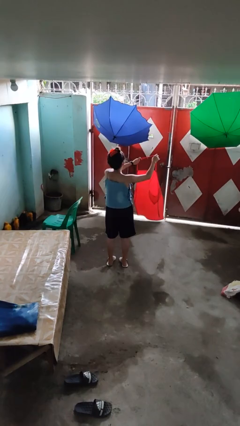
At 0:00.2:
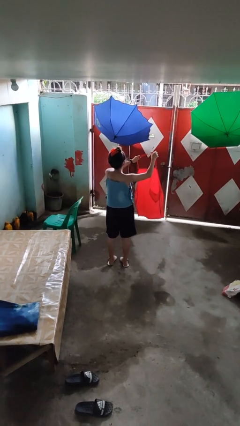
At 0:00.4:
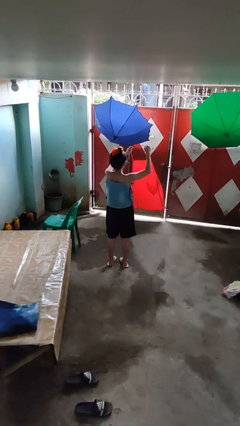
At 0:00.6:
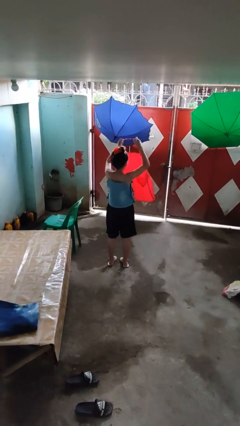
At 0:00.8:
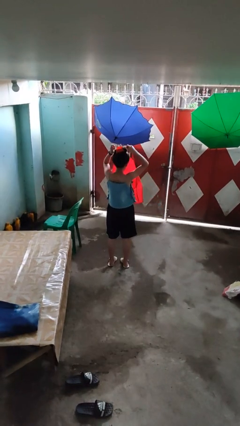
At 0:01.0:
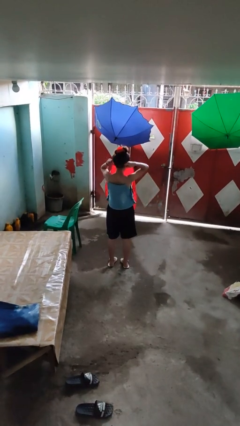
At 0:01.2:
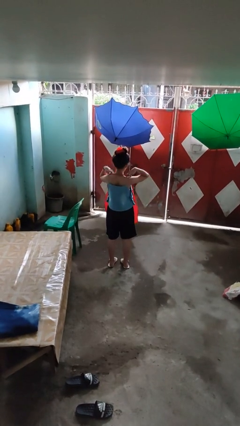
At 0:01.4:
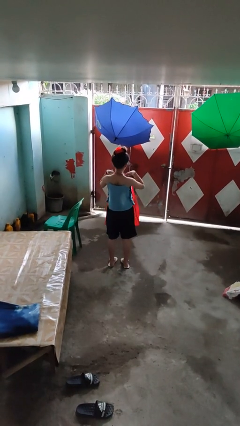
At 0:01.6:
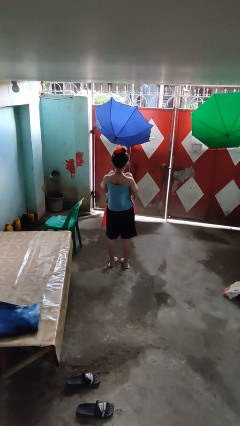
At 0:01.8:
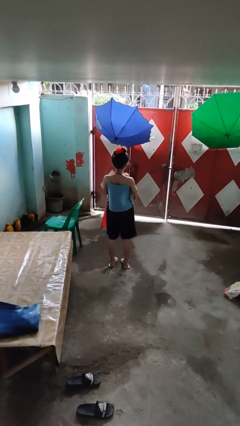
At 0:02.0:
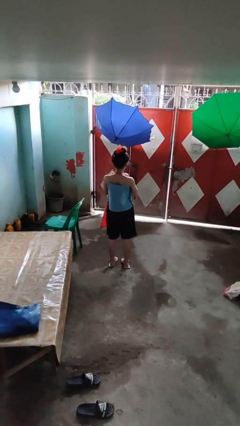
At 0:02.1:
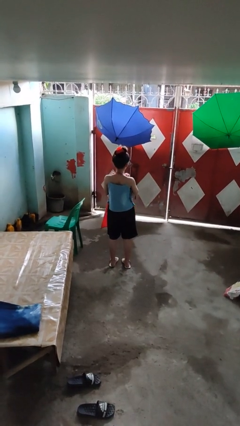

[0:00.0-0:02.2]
person puts on apron

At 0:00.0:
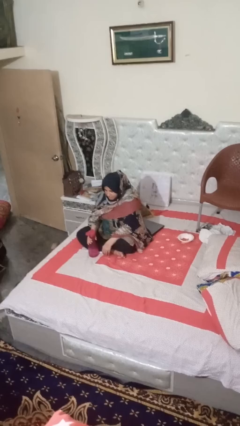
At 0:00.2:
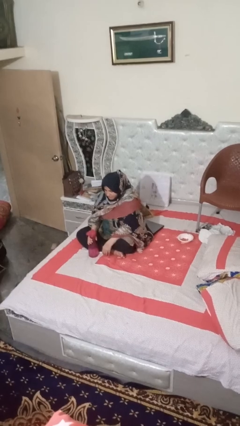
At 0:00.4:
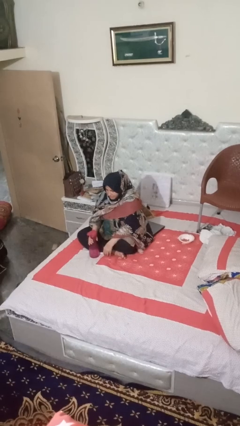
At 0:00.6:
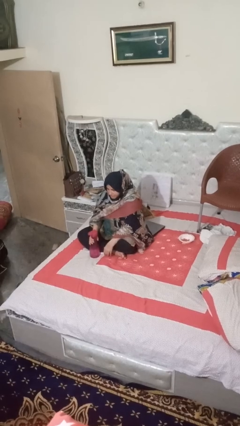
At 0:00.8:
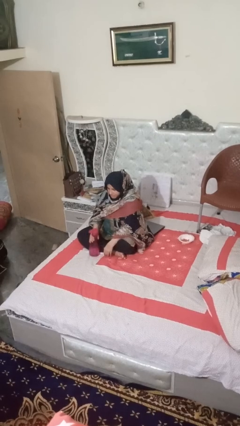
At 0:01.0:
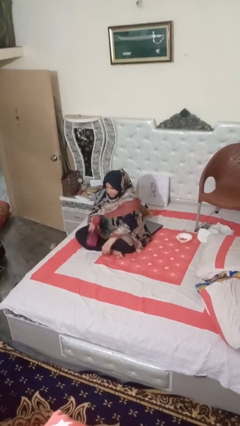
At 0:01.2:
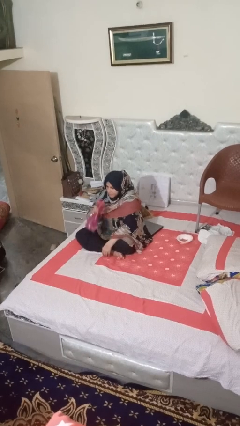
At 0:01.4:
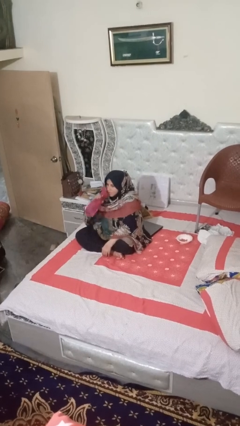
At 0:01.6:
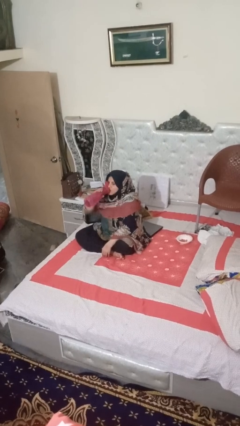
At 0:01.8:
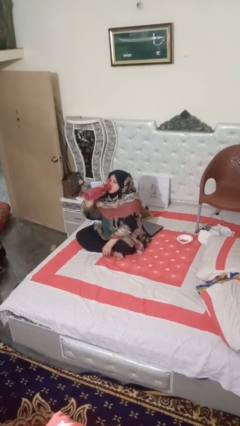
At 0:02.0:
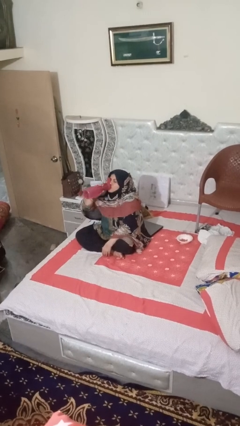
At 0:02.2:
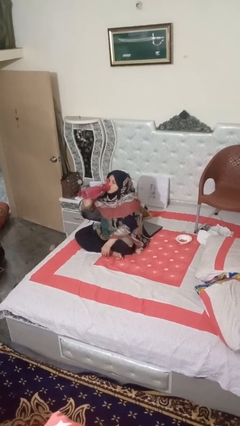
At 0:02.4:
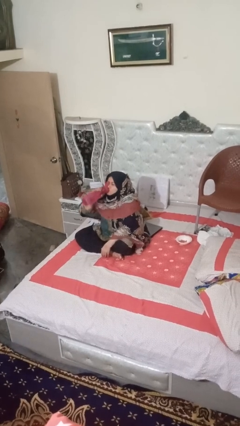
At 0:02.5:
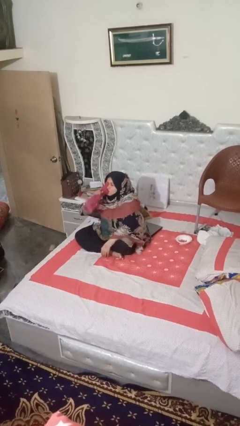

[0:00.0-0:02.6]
person drinks from bottle

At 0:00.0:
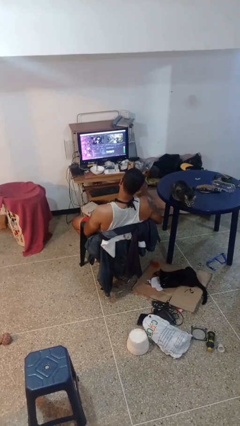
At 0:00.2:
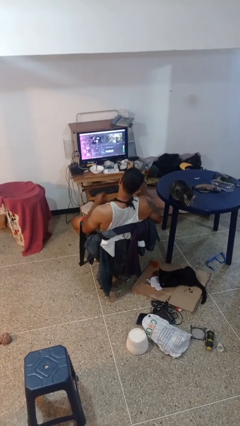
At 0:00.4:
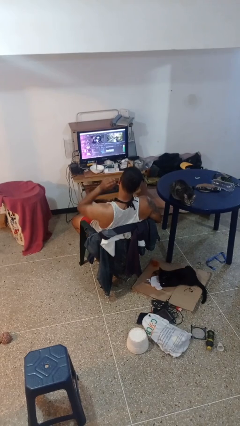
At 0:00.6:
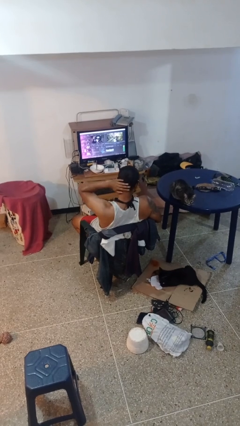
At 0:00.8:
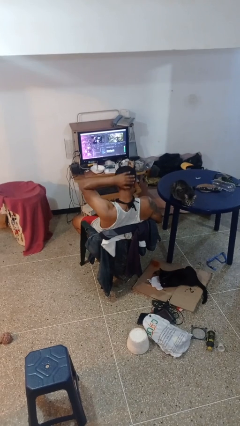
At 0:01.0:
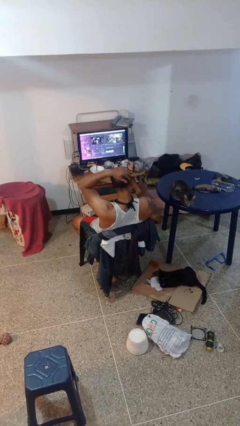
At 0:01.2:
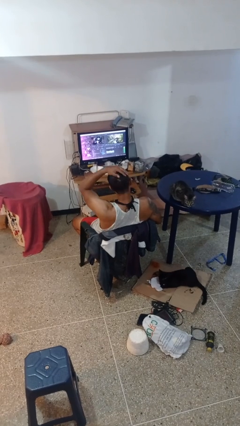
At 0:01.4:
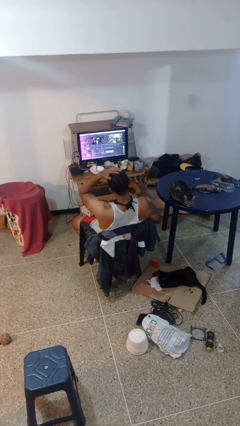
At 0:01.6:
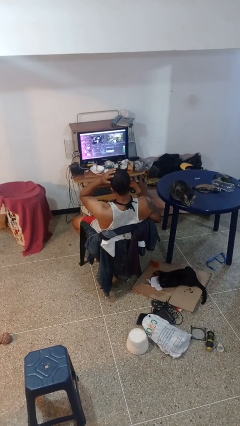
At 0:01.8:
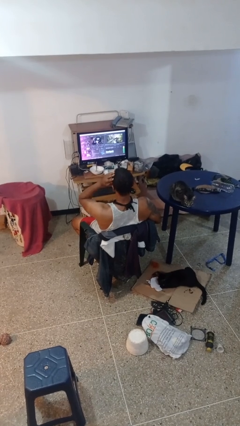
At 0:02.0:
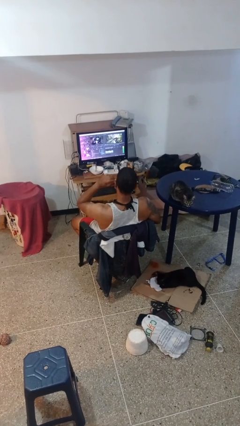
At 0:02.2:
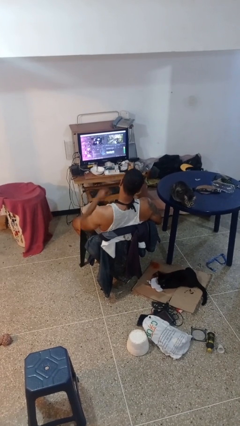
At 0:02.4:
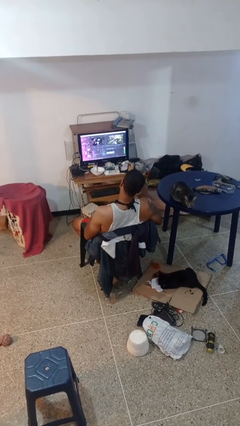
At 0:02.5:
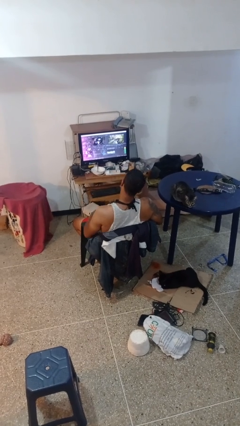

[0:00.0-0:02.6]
person strokes hair

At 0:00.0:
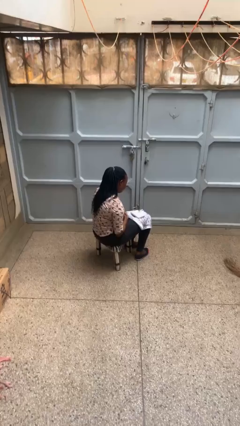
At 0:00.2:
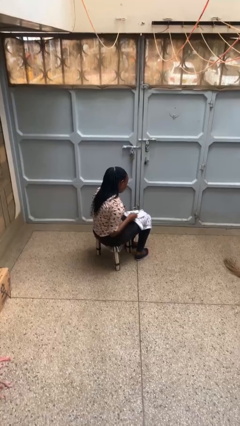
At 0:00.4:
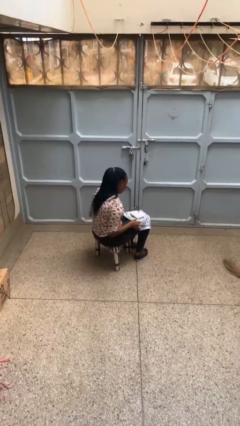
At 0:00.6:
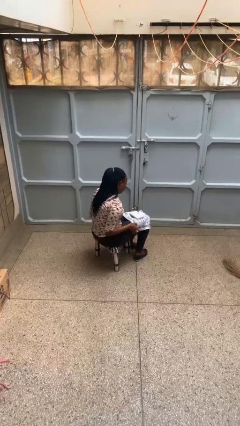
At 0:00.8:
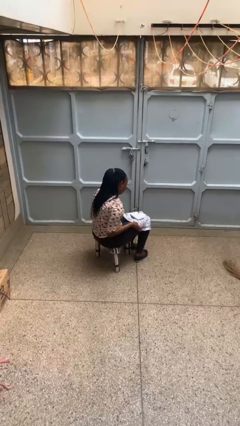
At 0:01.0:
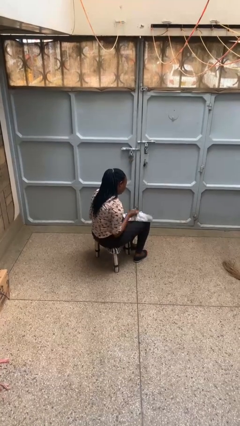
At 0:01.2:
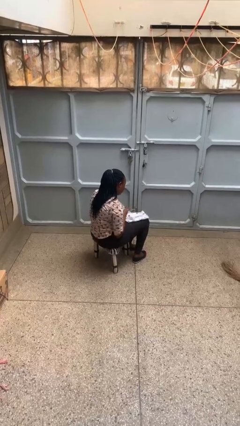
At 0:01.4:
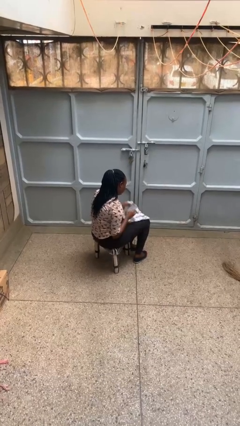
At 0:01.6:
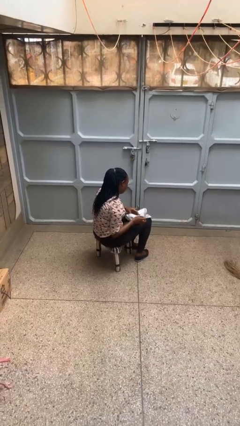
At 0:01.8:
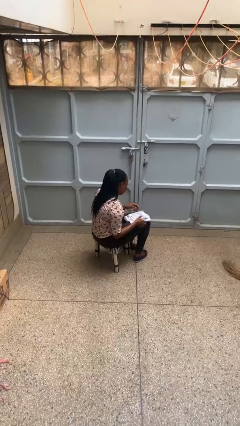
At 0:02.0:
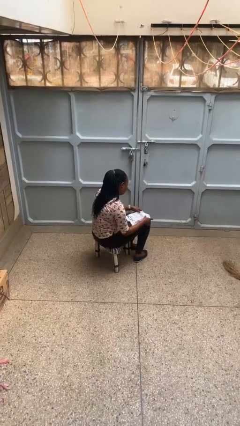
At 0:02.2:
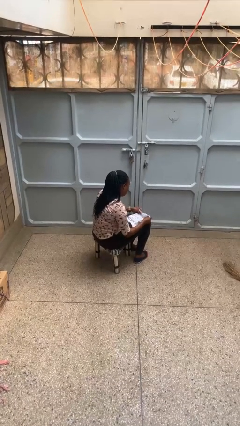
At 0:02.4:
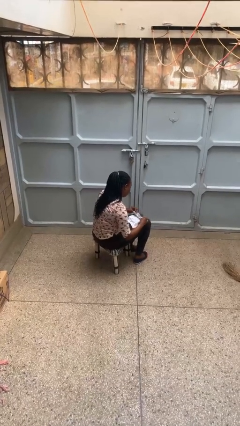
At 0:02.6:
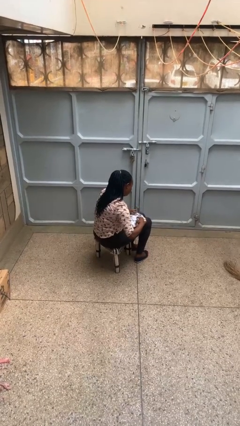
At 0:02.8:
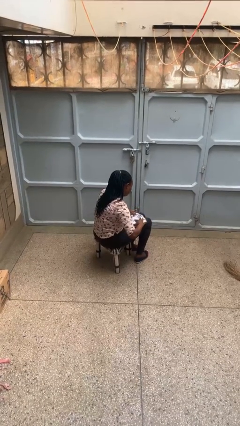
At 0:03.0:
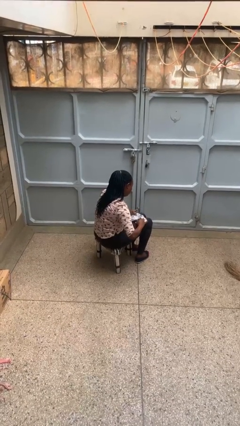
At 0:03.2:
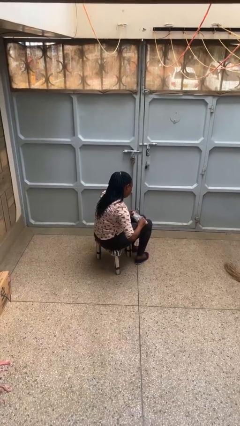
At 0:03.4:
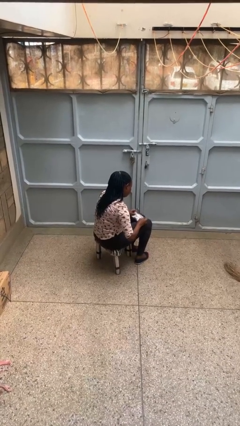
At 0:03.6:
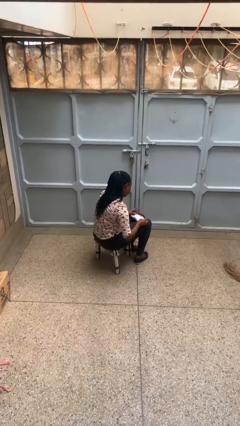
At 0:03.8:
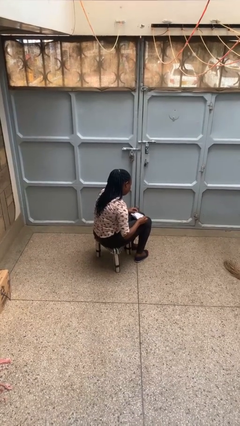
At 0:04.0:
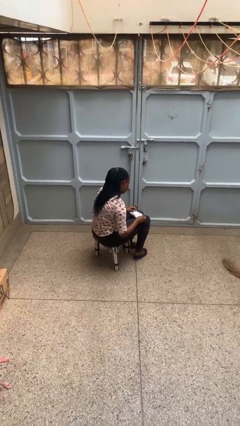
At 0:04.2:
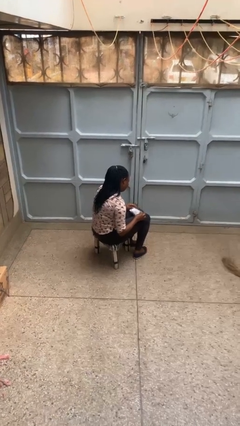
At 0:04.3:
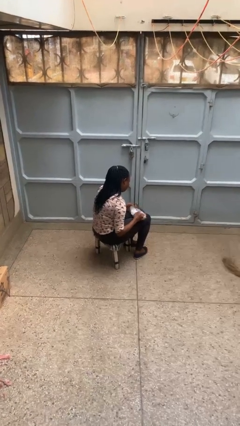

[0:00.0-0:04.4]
person wraps box

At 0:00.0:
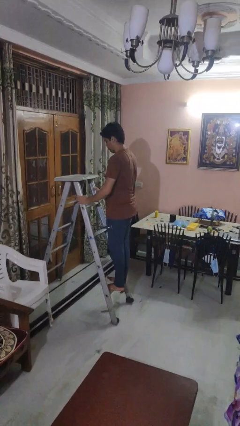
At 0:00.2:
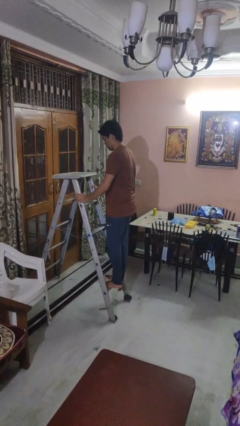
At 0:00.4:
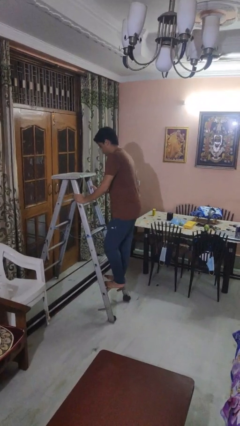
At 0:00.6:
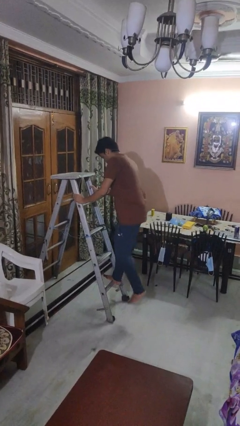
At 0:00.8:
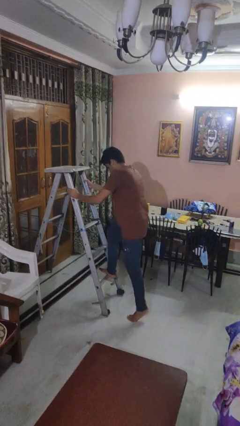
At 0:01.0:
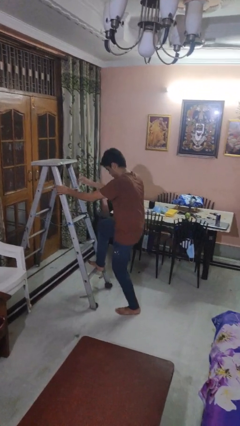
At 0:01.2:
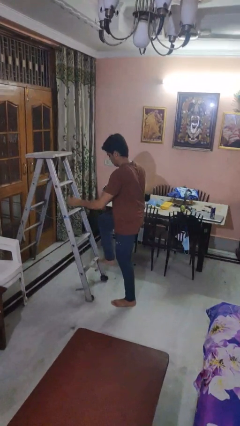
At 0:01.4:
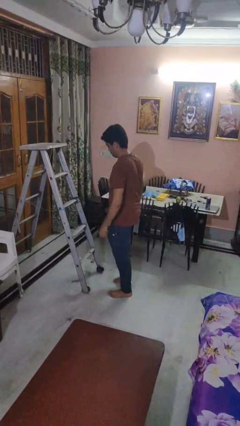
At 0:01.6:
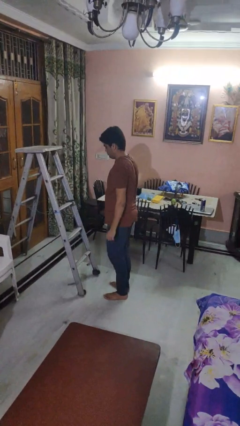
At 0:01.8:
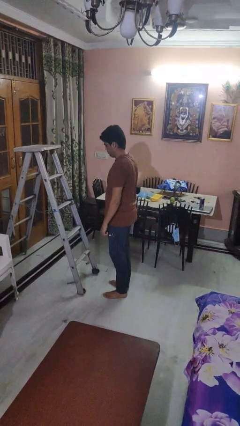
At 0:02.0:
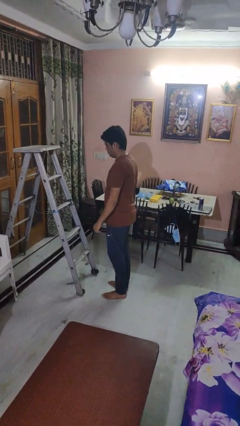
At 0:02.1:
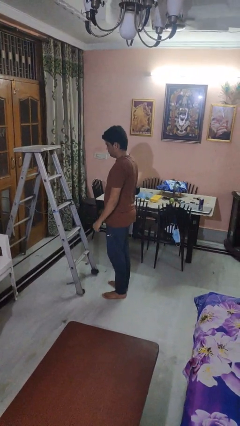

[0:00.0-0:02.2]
person climbs down ladder

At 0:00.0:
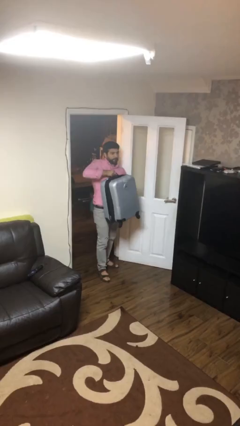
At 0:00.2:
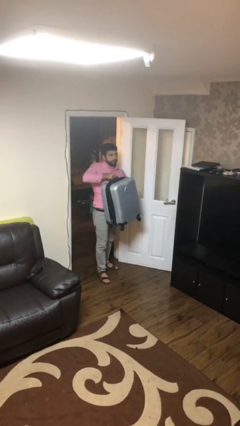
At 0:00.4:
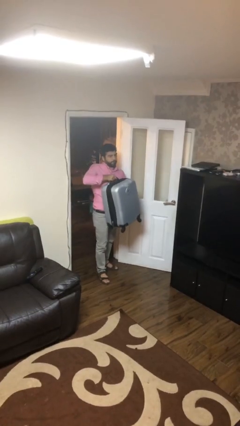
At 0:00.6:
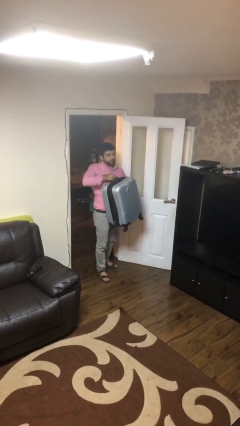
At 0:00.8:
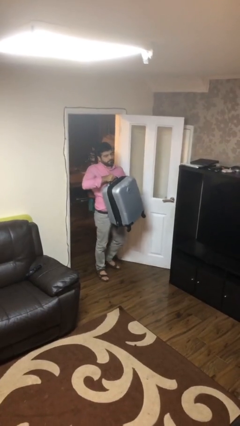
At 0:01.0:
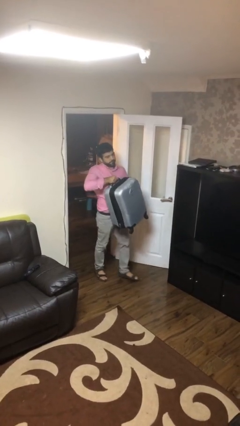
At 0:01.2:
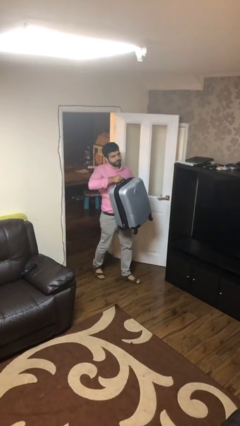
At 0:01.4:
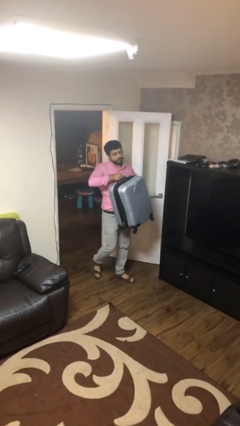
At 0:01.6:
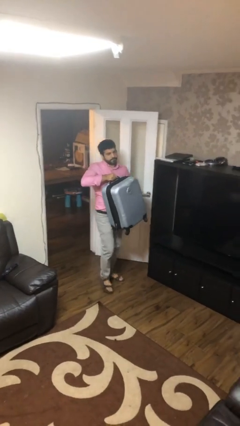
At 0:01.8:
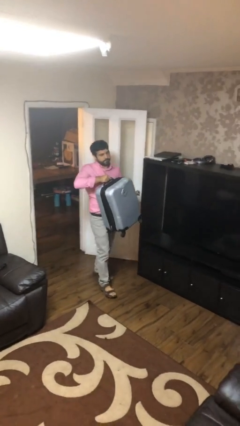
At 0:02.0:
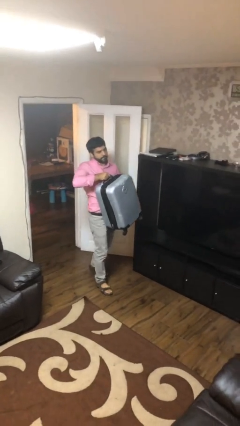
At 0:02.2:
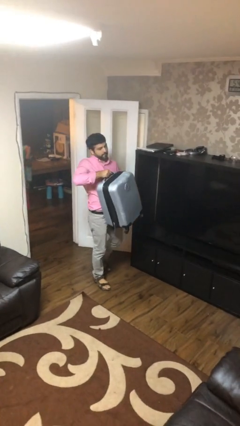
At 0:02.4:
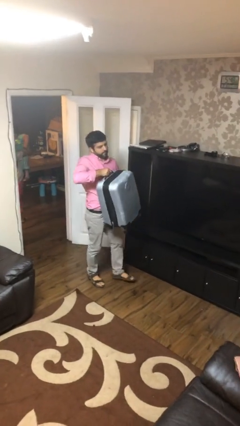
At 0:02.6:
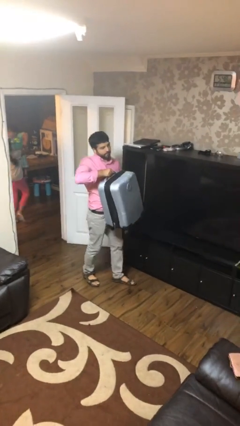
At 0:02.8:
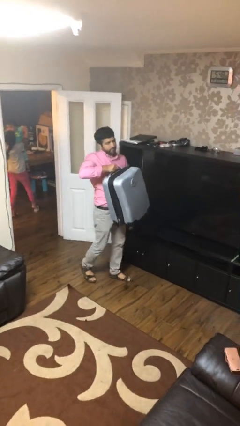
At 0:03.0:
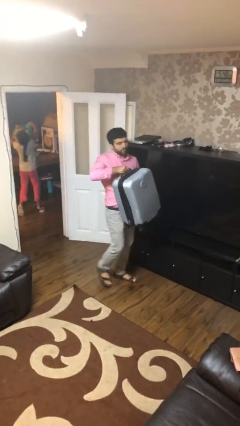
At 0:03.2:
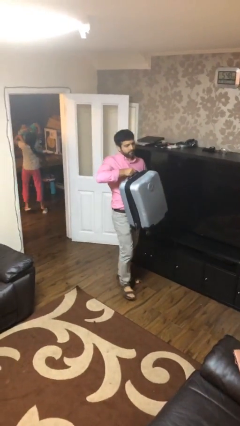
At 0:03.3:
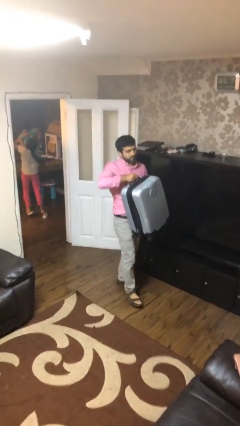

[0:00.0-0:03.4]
person carries heavy object
